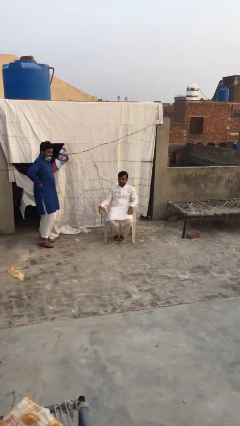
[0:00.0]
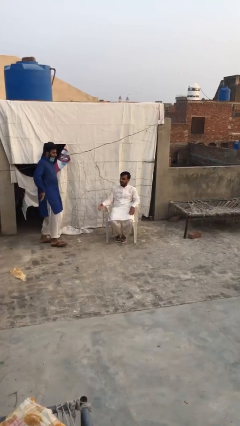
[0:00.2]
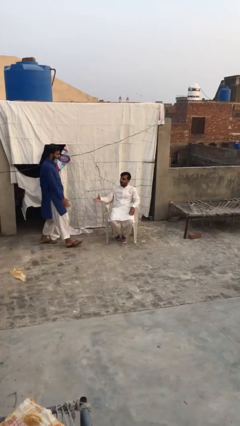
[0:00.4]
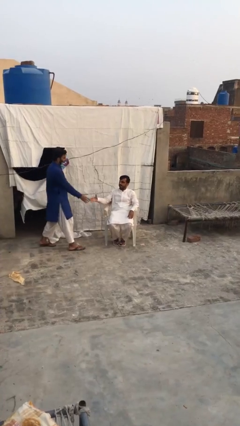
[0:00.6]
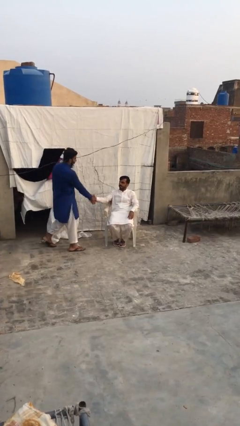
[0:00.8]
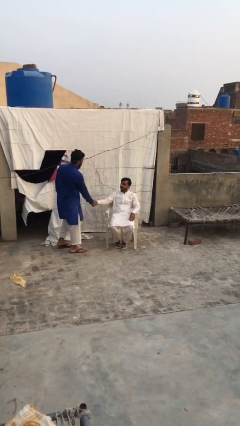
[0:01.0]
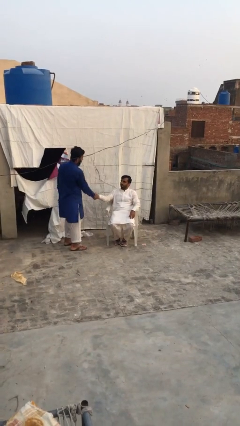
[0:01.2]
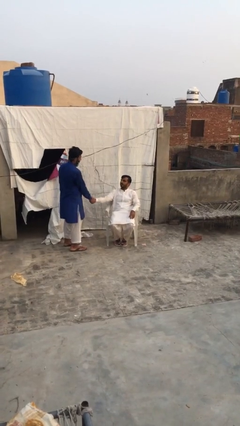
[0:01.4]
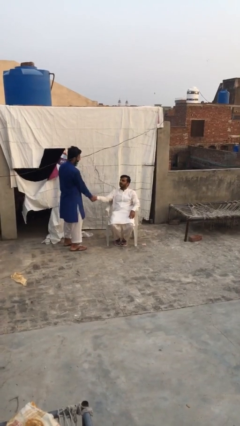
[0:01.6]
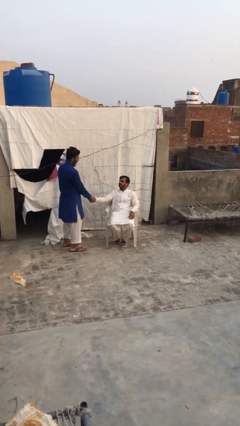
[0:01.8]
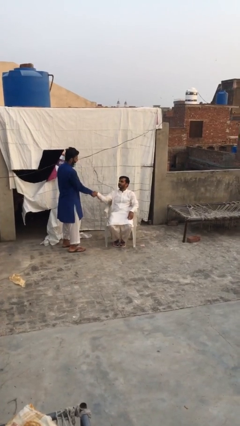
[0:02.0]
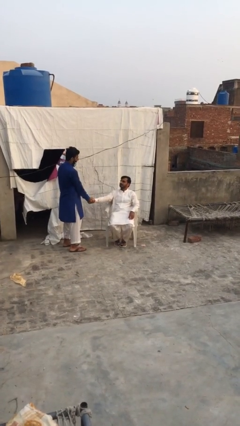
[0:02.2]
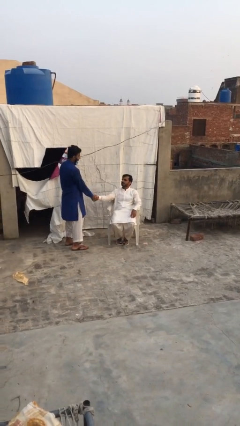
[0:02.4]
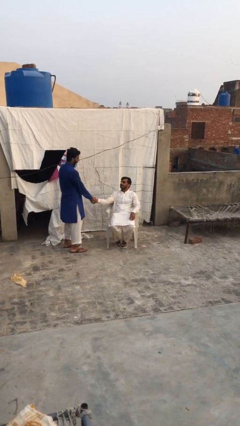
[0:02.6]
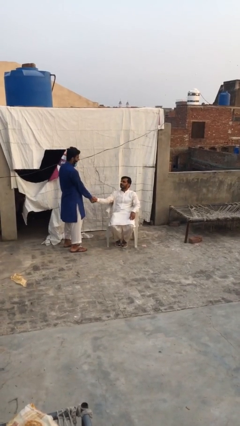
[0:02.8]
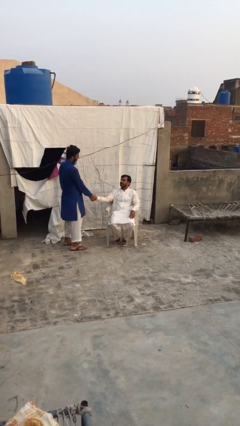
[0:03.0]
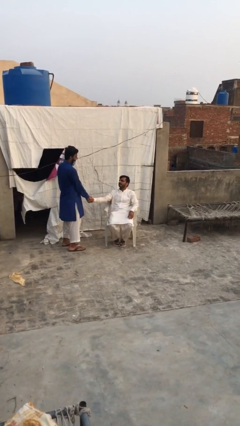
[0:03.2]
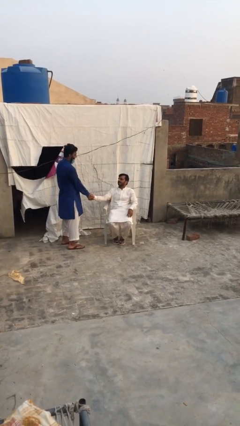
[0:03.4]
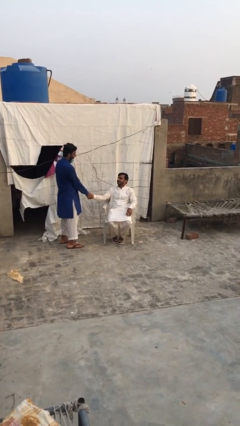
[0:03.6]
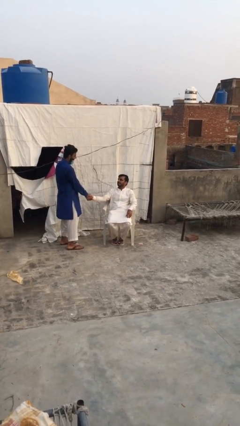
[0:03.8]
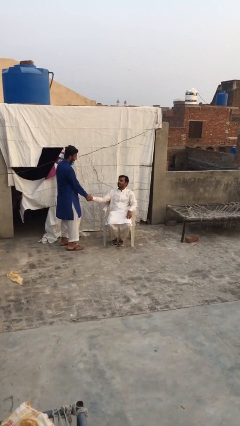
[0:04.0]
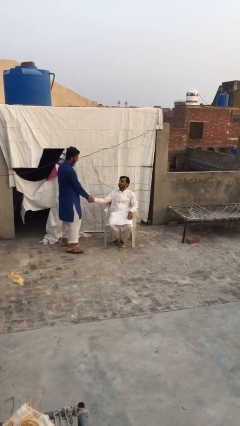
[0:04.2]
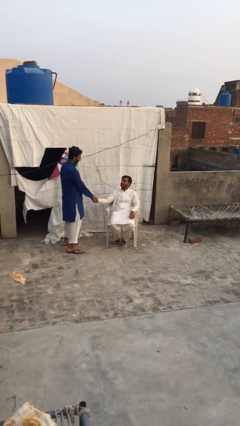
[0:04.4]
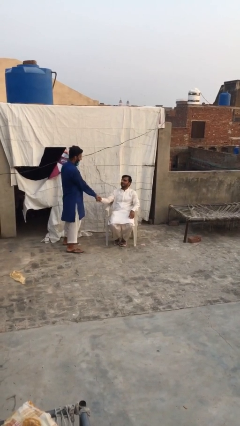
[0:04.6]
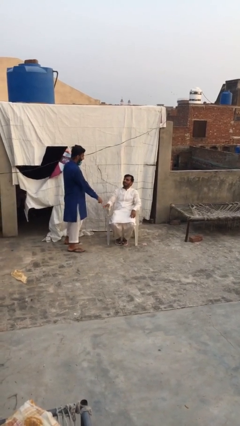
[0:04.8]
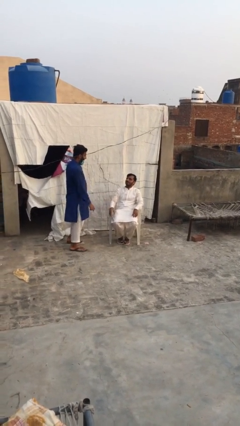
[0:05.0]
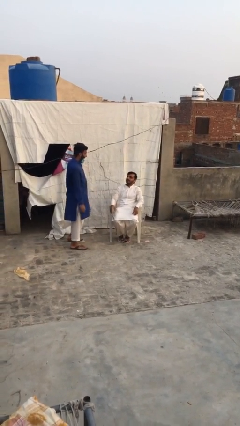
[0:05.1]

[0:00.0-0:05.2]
person shakes hand

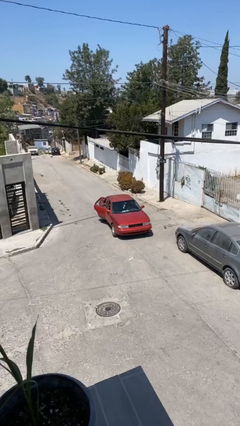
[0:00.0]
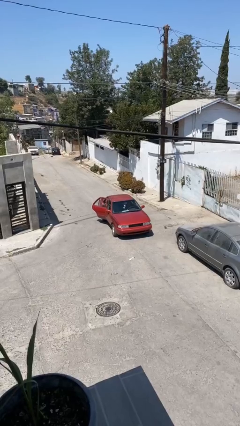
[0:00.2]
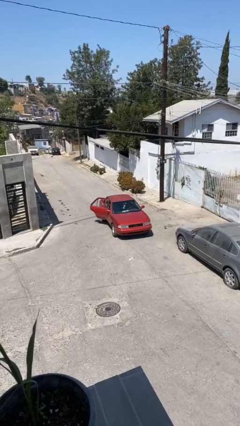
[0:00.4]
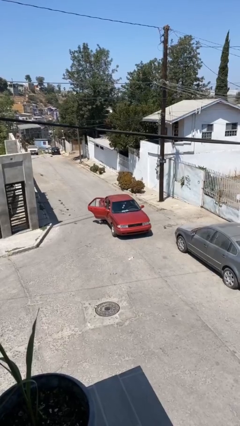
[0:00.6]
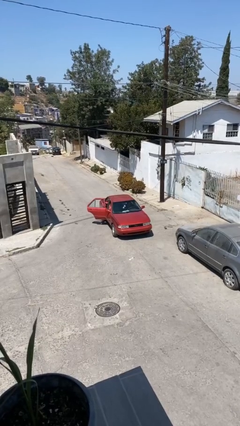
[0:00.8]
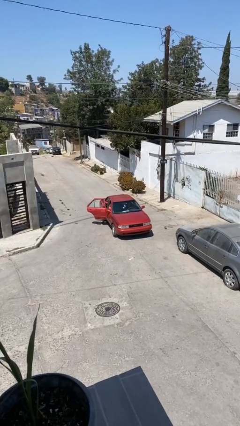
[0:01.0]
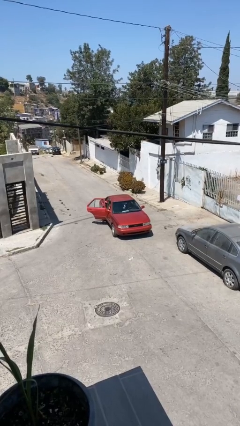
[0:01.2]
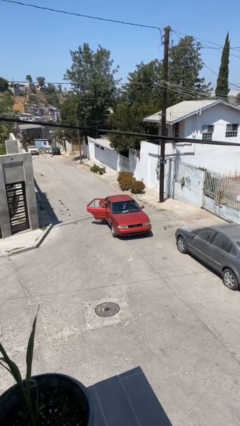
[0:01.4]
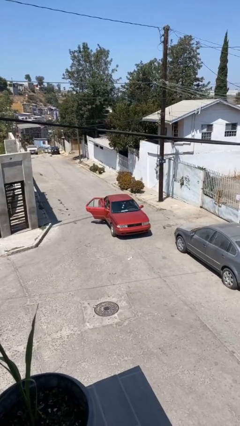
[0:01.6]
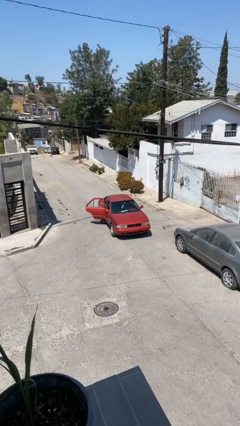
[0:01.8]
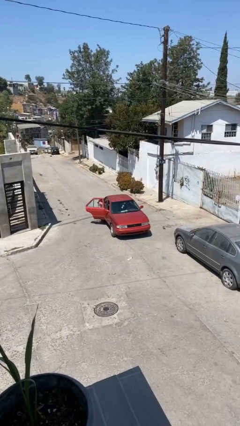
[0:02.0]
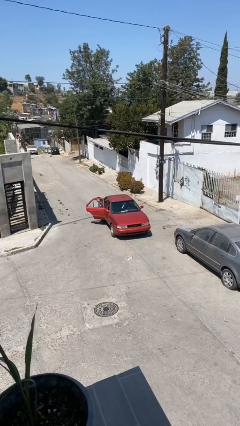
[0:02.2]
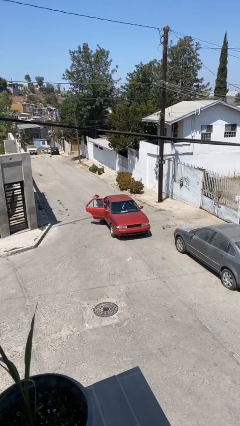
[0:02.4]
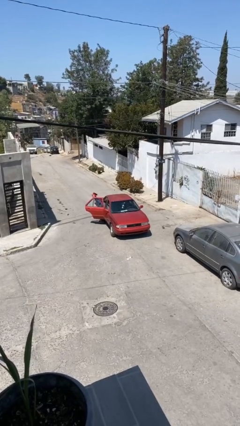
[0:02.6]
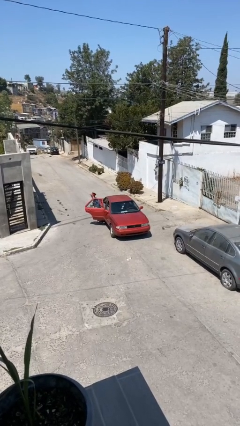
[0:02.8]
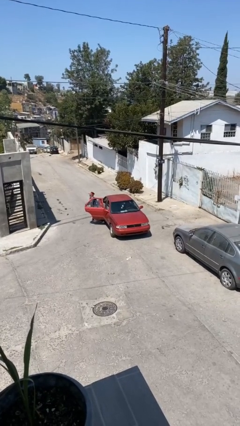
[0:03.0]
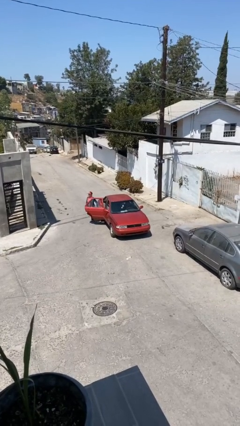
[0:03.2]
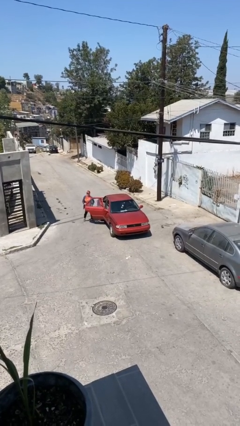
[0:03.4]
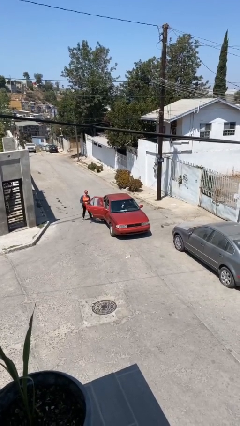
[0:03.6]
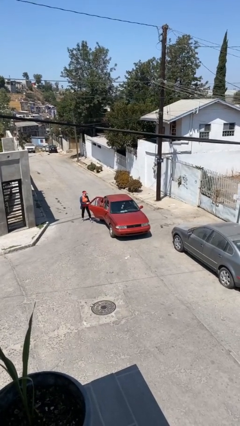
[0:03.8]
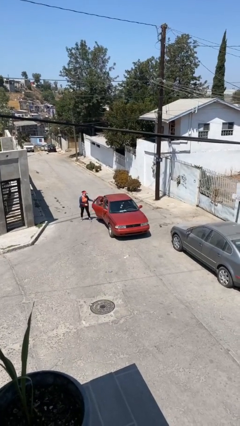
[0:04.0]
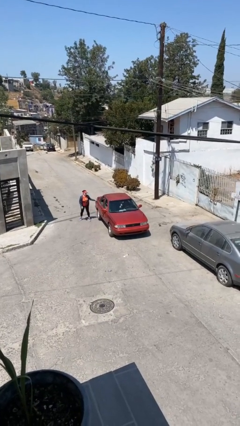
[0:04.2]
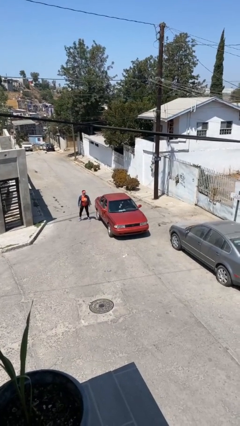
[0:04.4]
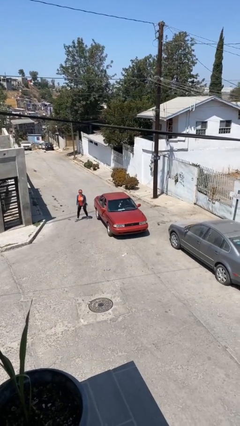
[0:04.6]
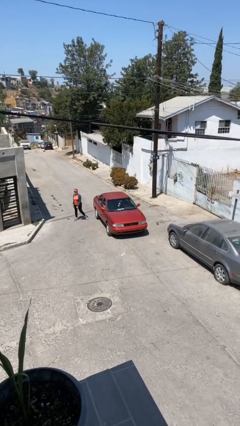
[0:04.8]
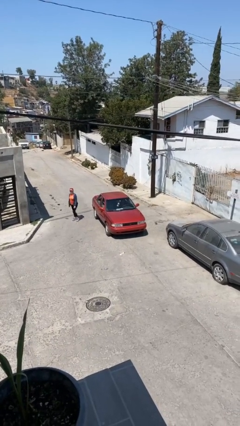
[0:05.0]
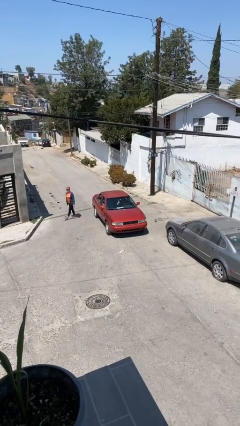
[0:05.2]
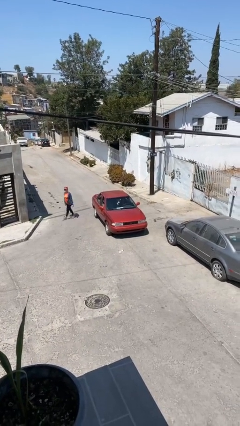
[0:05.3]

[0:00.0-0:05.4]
car drops off person

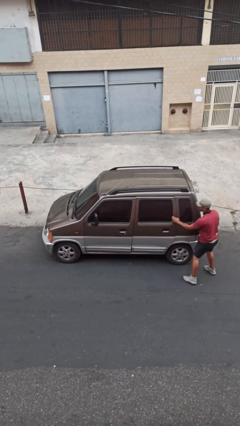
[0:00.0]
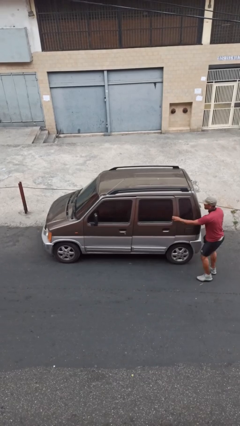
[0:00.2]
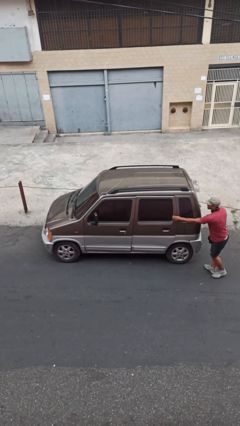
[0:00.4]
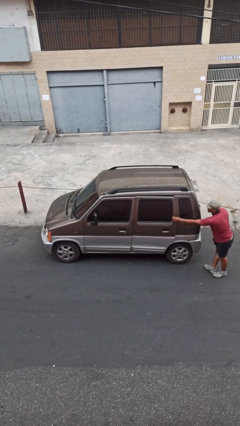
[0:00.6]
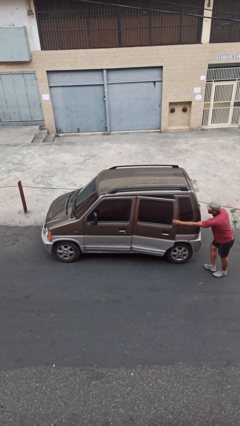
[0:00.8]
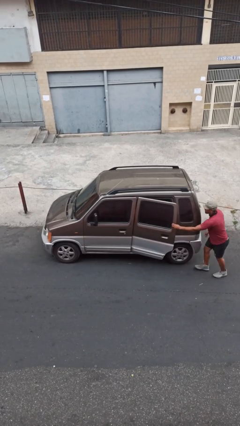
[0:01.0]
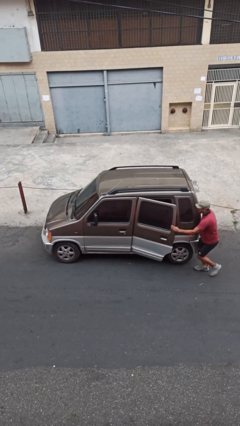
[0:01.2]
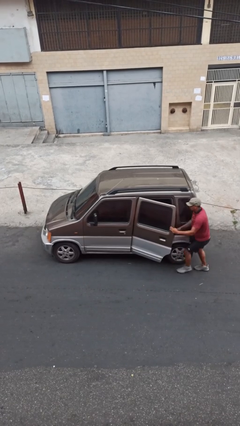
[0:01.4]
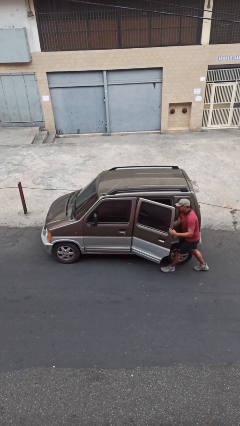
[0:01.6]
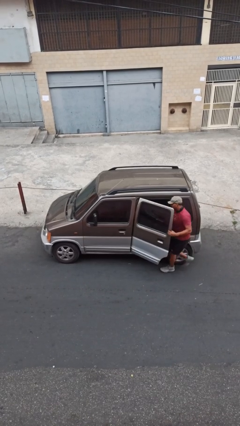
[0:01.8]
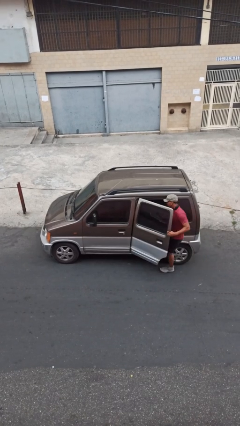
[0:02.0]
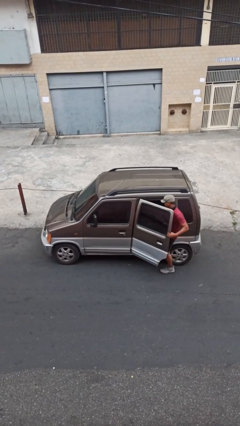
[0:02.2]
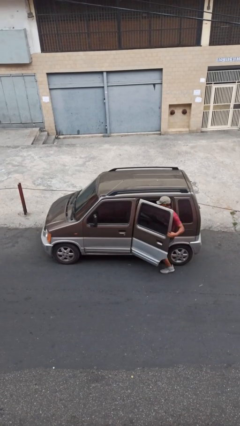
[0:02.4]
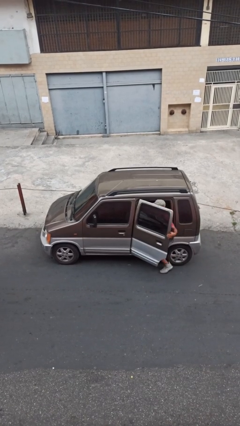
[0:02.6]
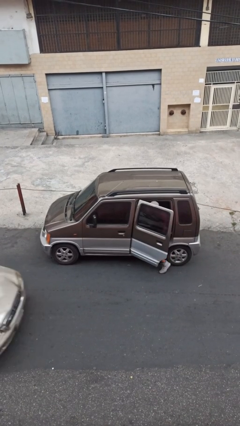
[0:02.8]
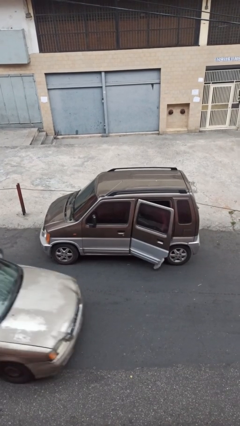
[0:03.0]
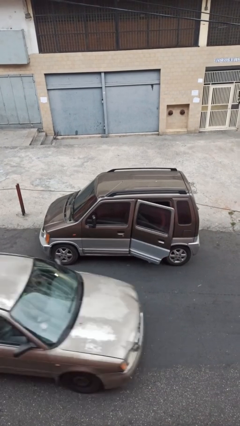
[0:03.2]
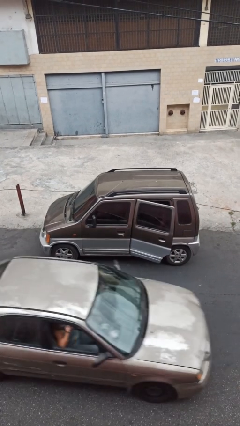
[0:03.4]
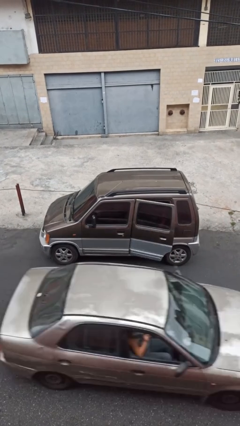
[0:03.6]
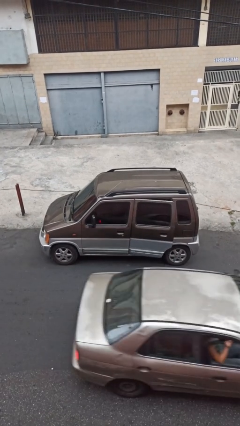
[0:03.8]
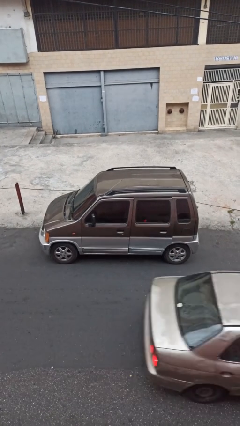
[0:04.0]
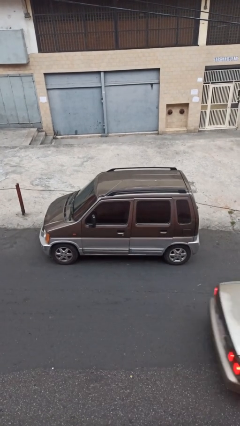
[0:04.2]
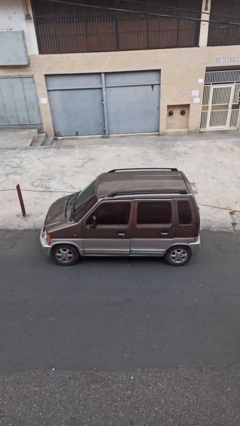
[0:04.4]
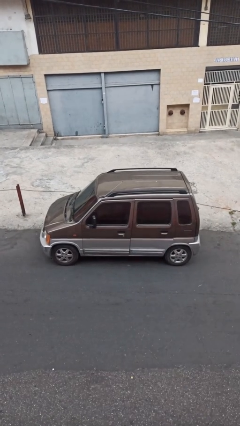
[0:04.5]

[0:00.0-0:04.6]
car picks up person

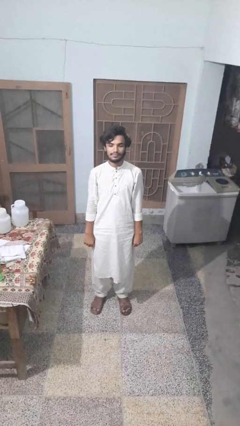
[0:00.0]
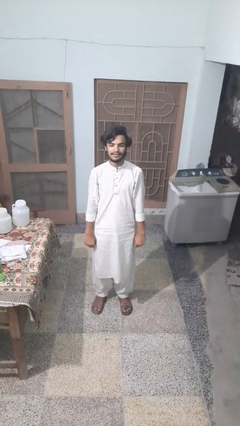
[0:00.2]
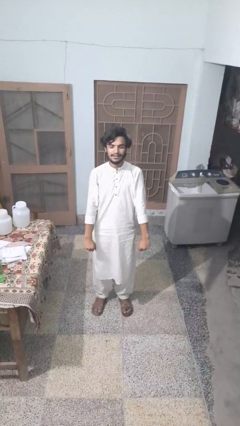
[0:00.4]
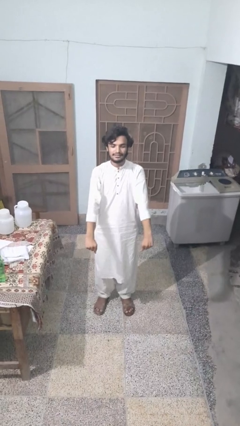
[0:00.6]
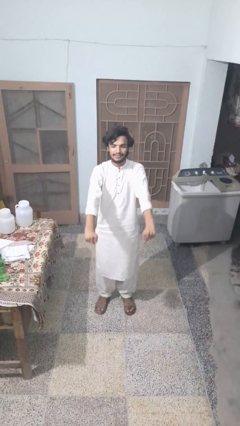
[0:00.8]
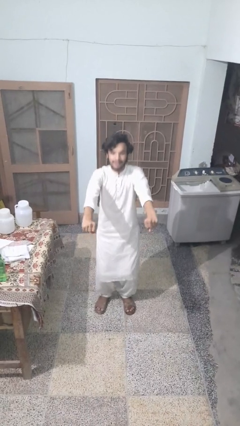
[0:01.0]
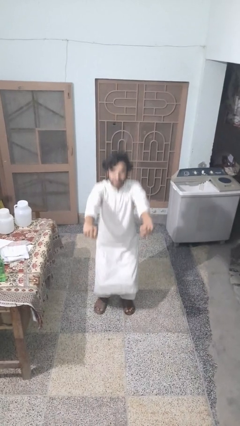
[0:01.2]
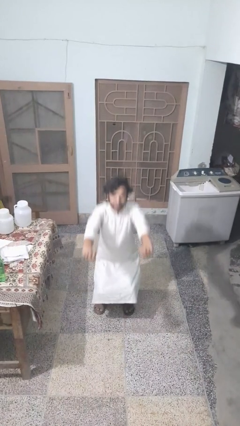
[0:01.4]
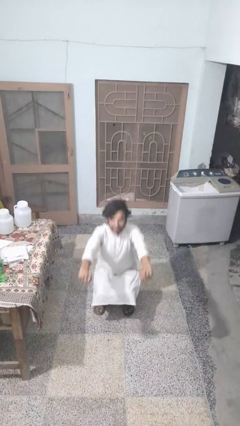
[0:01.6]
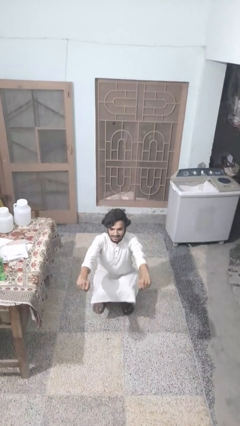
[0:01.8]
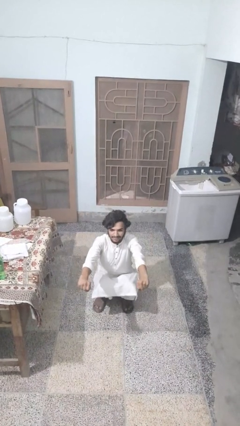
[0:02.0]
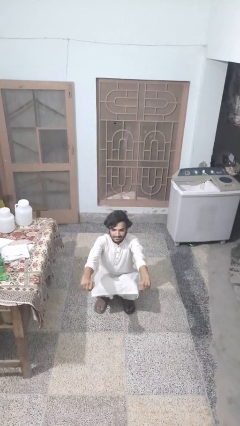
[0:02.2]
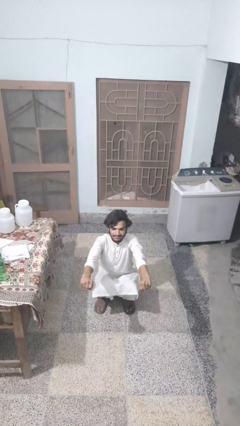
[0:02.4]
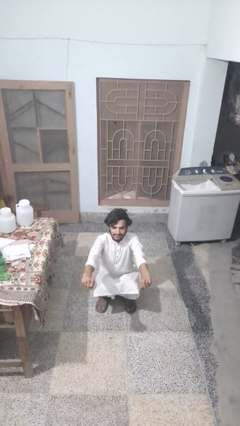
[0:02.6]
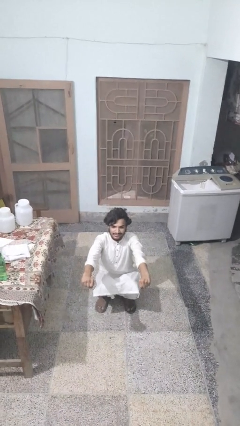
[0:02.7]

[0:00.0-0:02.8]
person squats
